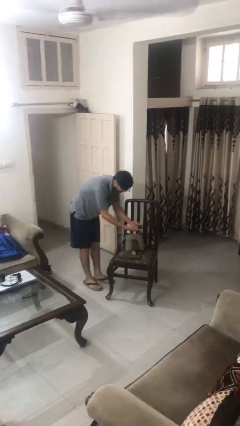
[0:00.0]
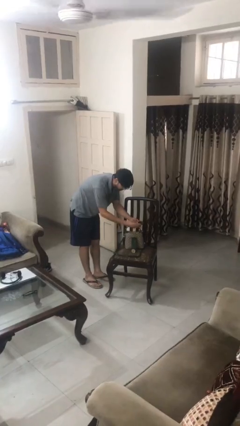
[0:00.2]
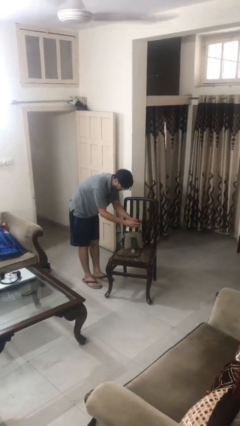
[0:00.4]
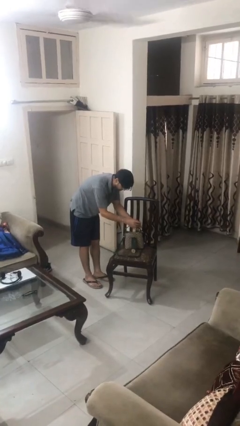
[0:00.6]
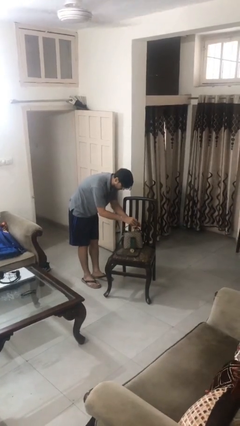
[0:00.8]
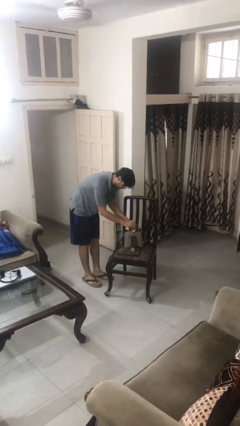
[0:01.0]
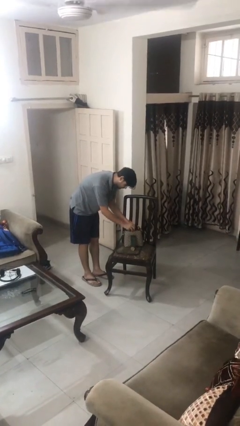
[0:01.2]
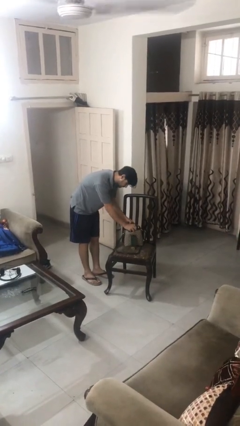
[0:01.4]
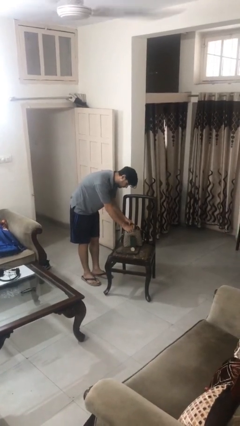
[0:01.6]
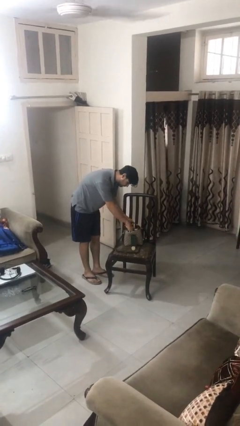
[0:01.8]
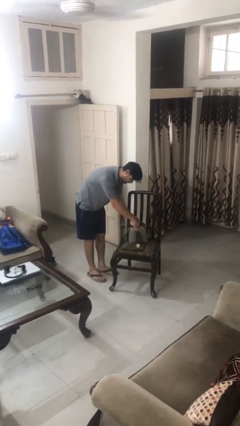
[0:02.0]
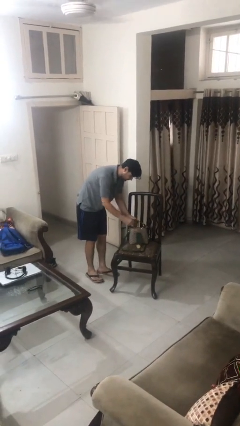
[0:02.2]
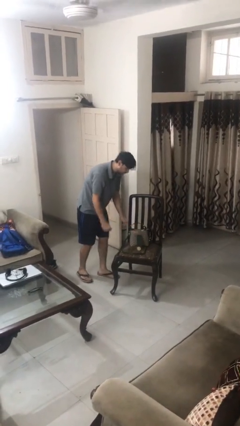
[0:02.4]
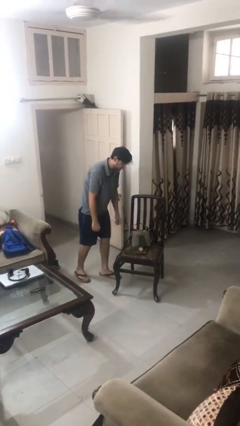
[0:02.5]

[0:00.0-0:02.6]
person puts object into purse

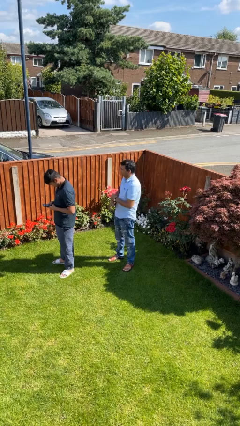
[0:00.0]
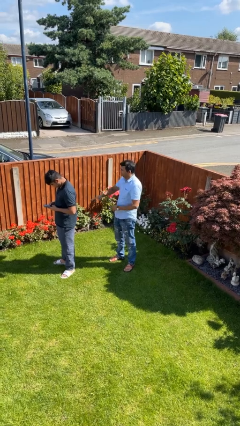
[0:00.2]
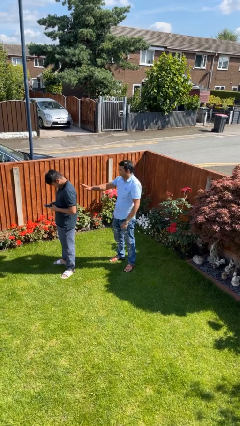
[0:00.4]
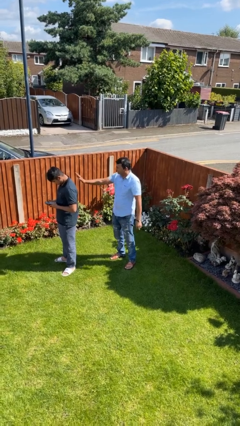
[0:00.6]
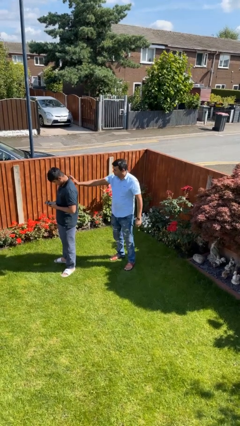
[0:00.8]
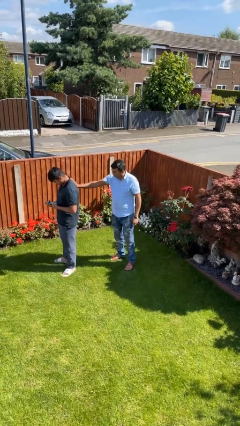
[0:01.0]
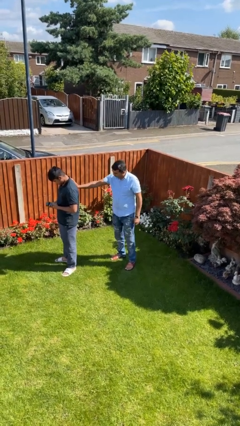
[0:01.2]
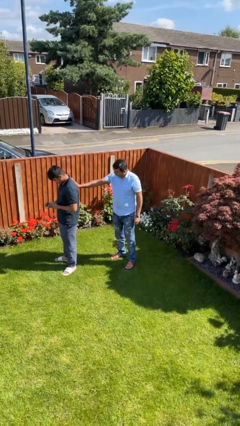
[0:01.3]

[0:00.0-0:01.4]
person touches back of person

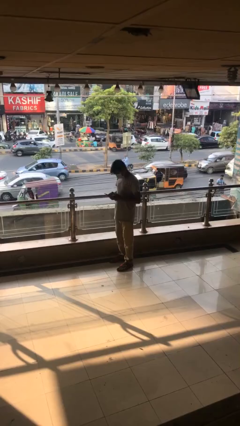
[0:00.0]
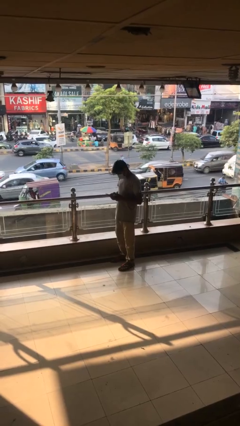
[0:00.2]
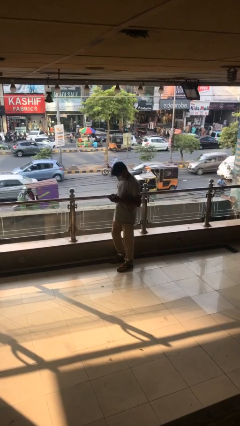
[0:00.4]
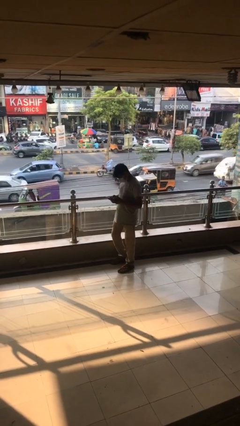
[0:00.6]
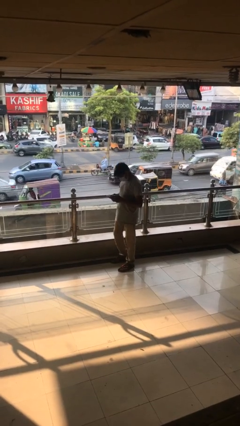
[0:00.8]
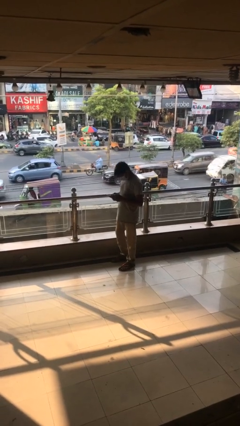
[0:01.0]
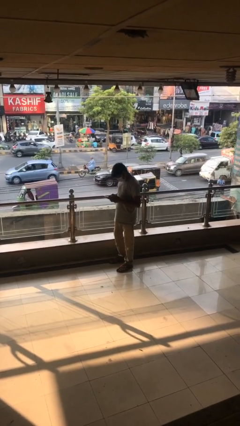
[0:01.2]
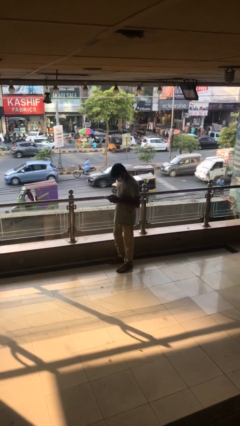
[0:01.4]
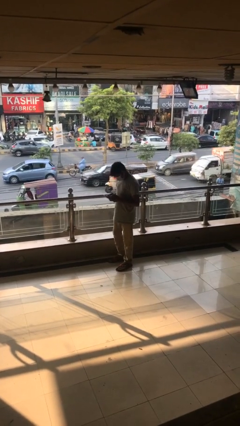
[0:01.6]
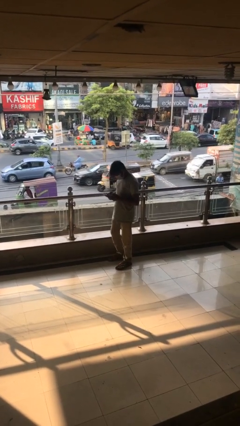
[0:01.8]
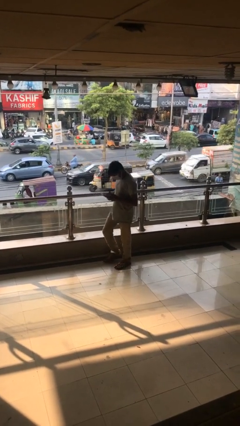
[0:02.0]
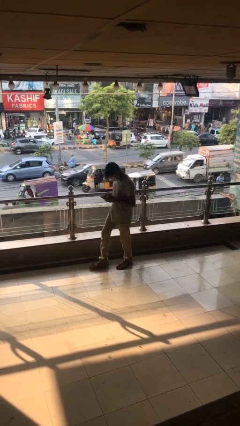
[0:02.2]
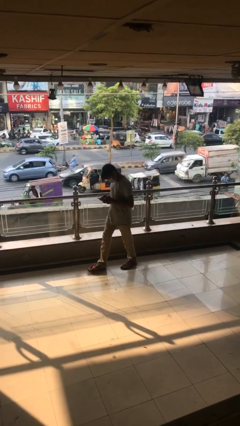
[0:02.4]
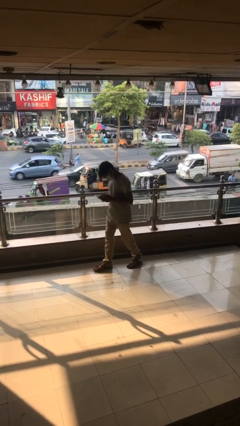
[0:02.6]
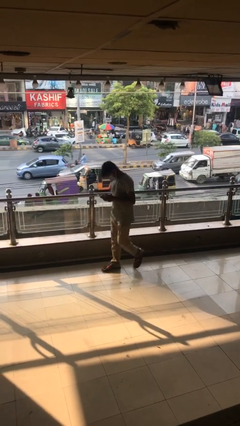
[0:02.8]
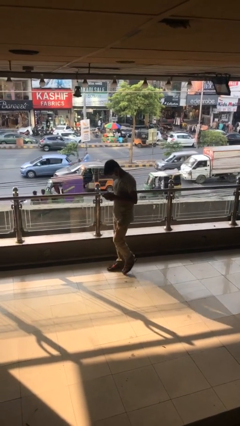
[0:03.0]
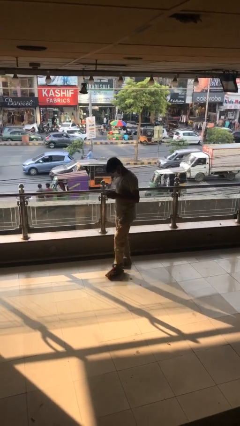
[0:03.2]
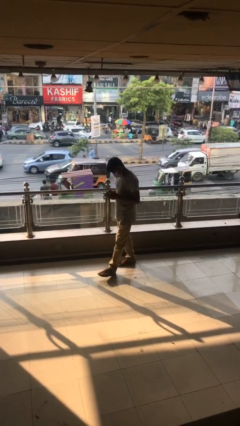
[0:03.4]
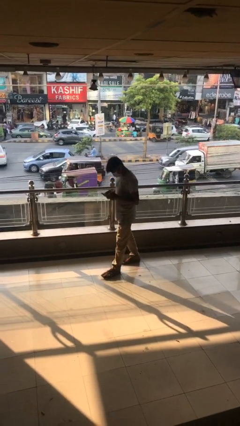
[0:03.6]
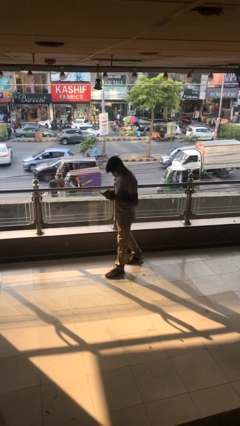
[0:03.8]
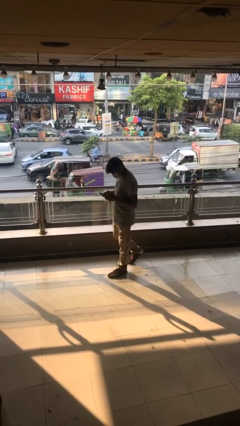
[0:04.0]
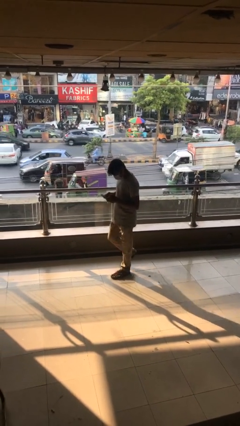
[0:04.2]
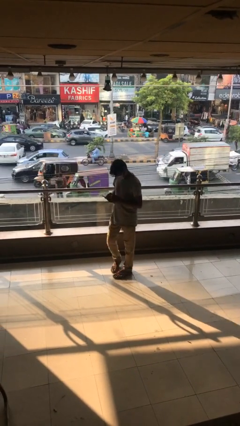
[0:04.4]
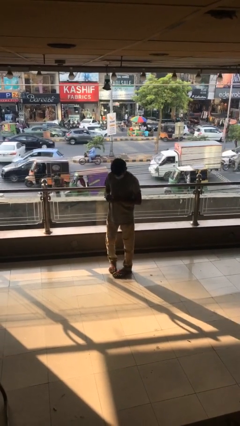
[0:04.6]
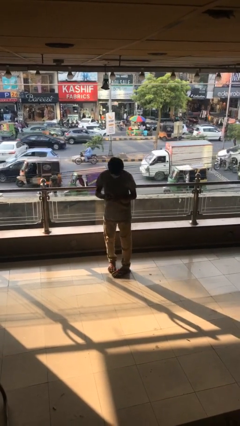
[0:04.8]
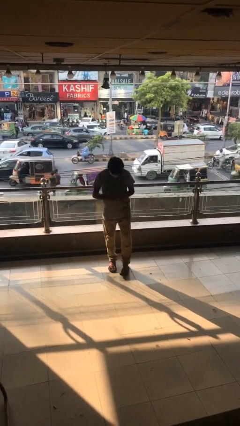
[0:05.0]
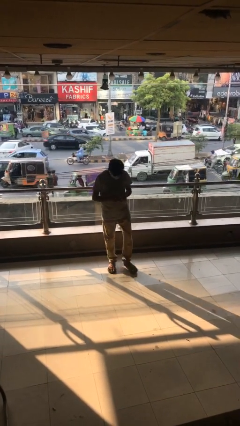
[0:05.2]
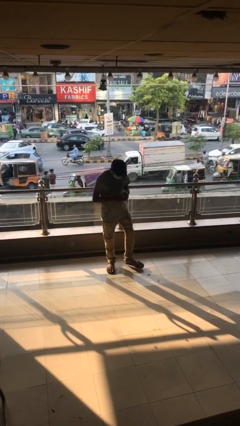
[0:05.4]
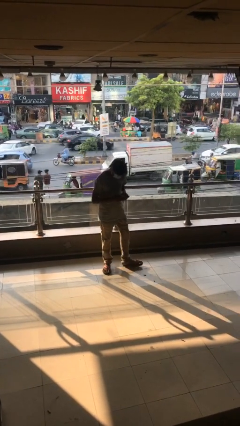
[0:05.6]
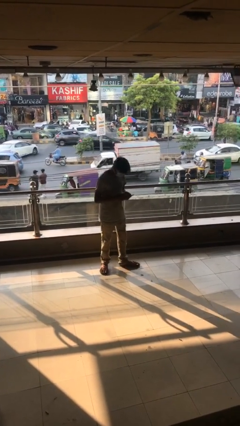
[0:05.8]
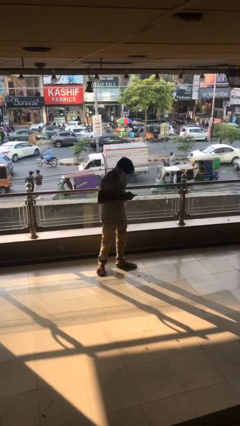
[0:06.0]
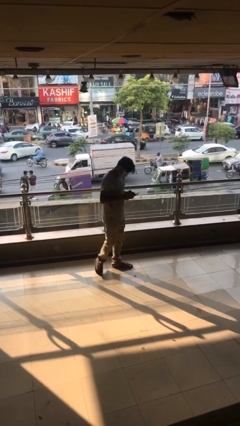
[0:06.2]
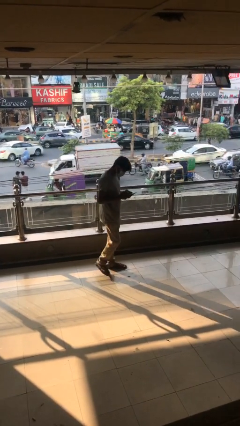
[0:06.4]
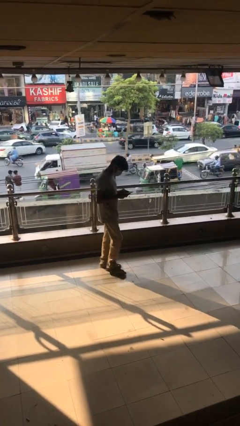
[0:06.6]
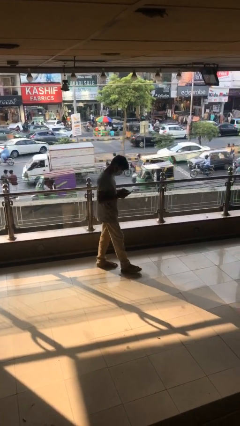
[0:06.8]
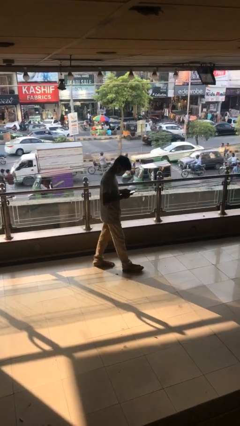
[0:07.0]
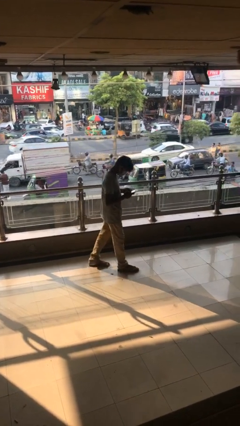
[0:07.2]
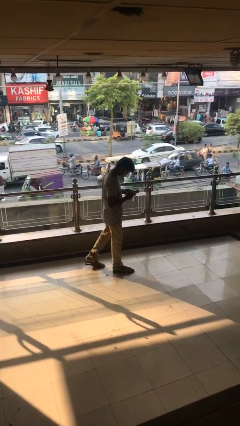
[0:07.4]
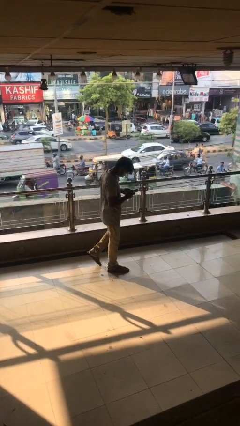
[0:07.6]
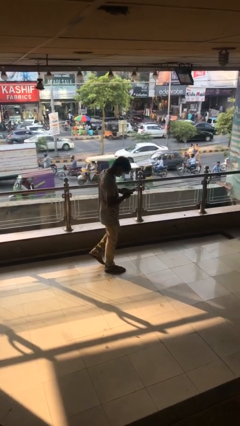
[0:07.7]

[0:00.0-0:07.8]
person texts on phone

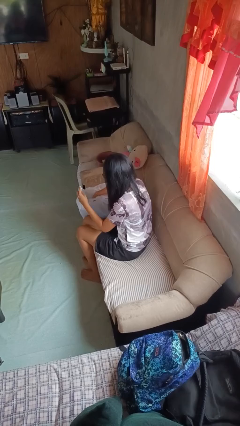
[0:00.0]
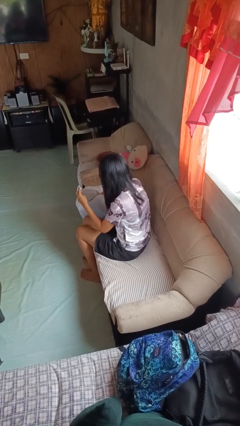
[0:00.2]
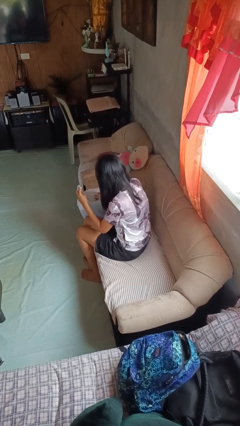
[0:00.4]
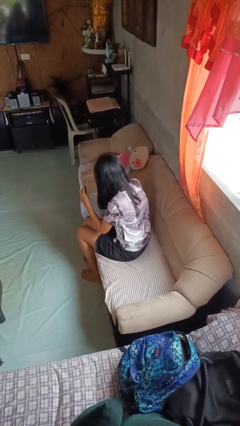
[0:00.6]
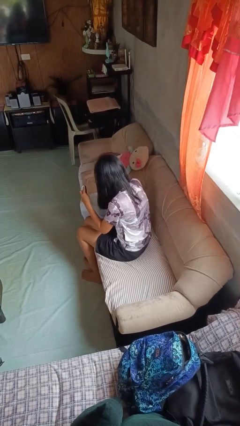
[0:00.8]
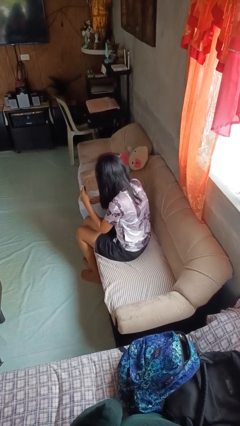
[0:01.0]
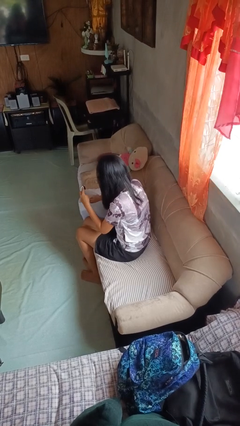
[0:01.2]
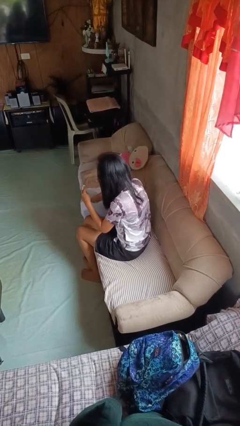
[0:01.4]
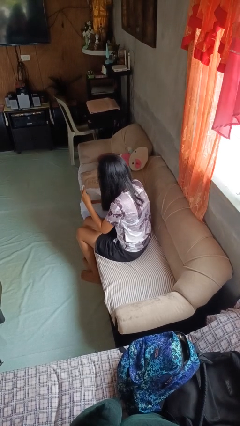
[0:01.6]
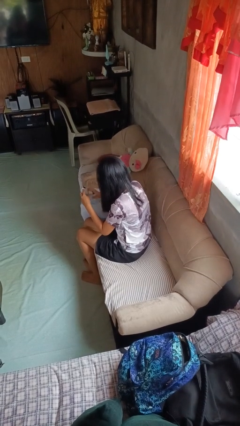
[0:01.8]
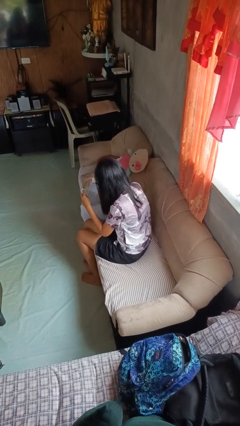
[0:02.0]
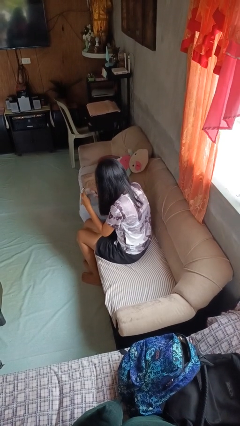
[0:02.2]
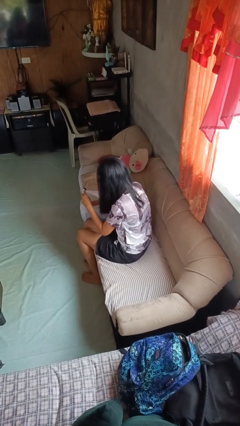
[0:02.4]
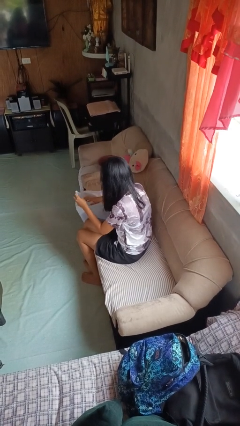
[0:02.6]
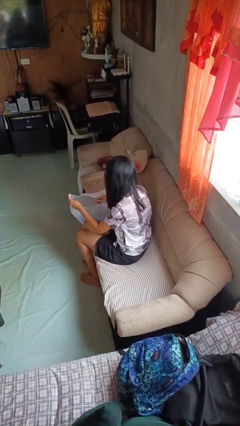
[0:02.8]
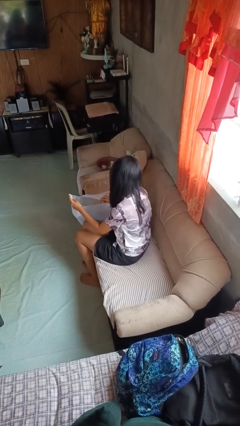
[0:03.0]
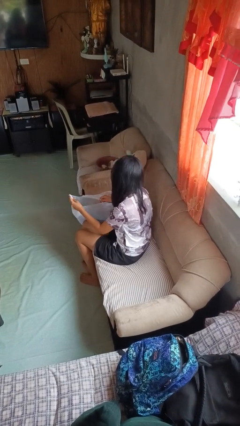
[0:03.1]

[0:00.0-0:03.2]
person searches in bag

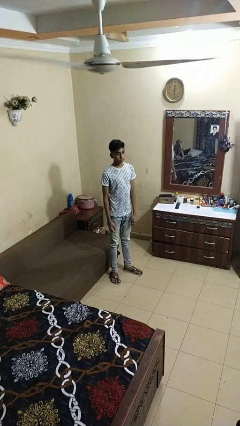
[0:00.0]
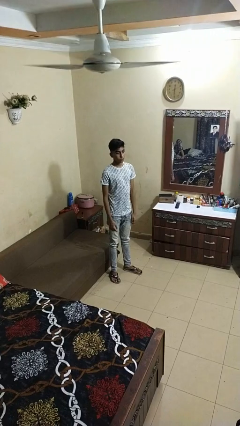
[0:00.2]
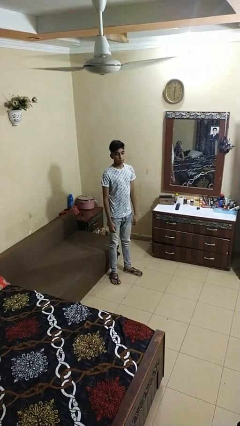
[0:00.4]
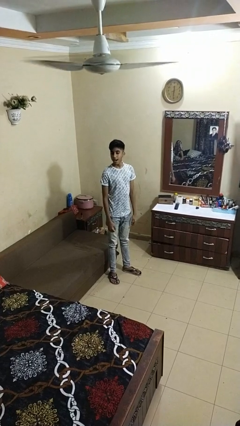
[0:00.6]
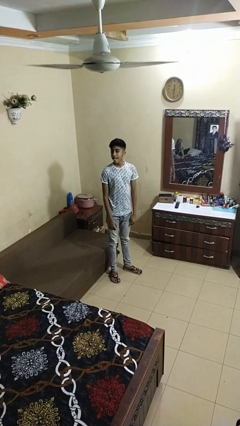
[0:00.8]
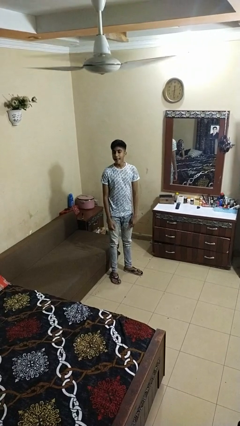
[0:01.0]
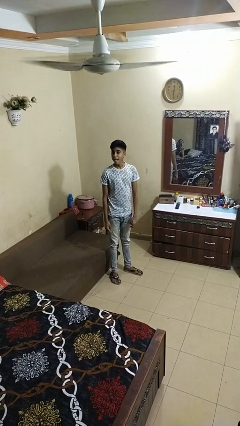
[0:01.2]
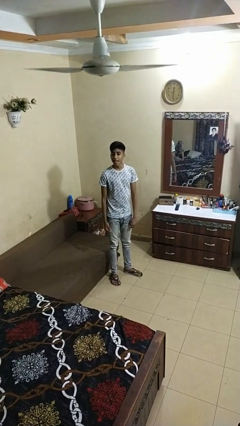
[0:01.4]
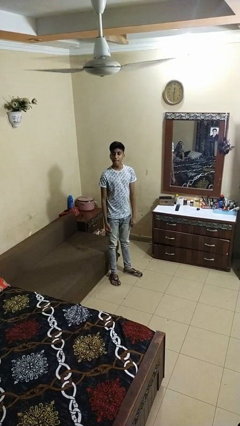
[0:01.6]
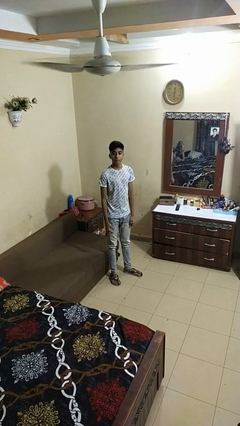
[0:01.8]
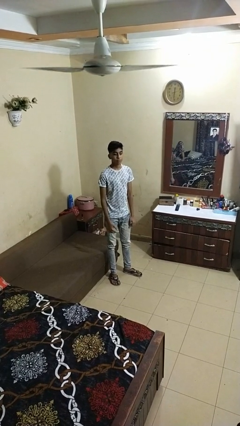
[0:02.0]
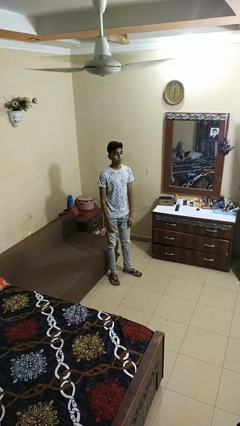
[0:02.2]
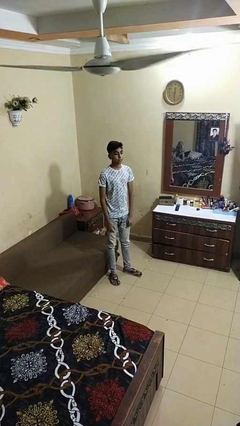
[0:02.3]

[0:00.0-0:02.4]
person sticks out tongue
